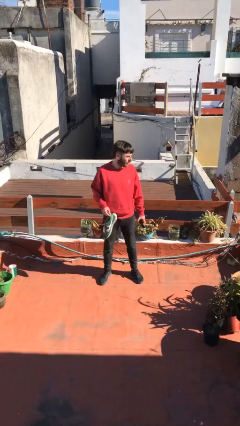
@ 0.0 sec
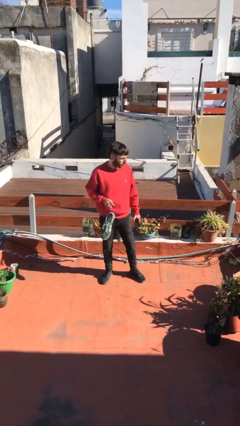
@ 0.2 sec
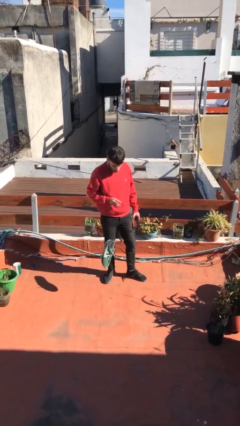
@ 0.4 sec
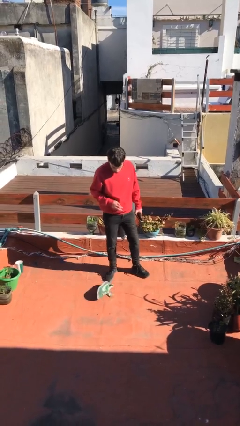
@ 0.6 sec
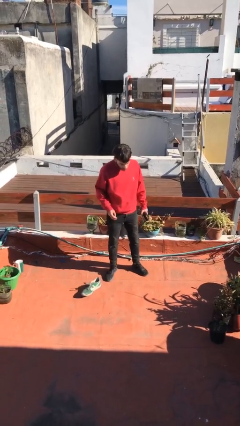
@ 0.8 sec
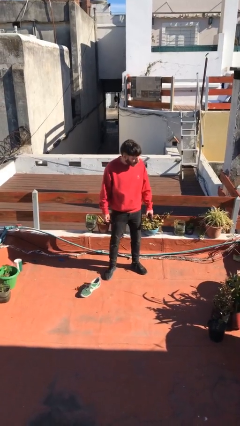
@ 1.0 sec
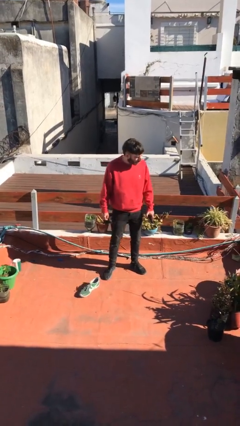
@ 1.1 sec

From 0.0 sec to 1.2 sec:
person drops object

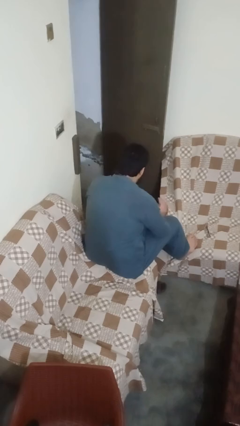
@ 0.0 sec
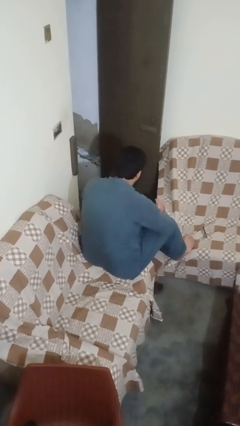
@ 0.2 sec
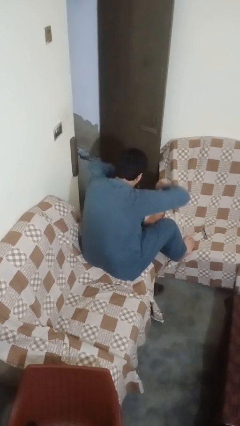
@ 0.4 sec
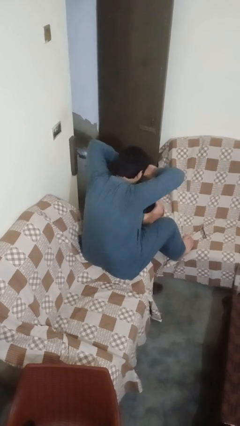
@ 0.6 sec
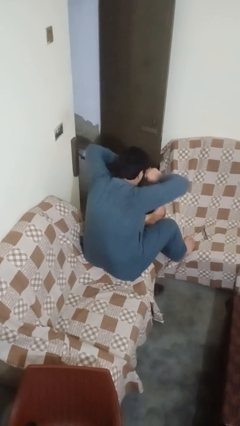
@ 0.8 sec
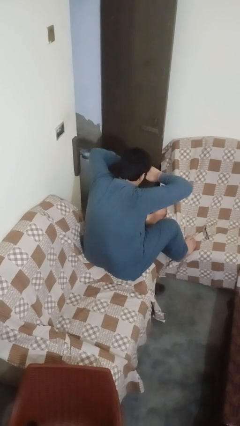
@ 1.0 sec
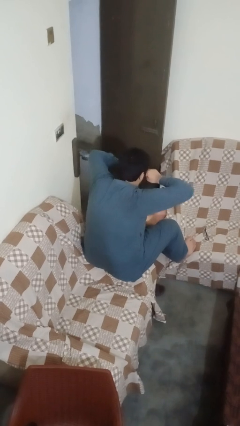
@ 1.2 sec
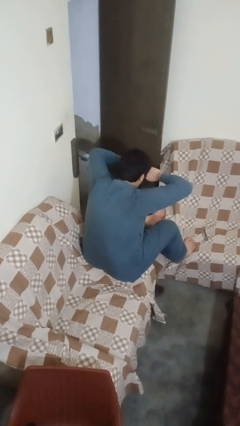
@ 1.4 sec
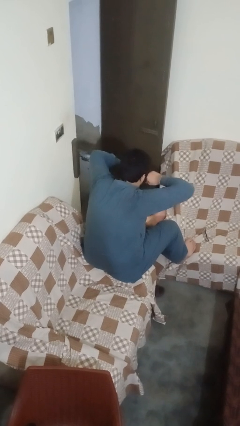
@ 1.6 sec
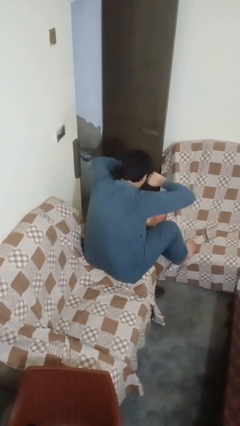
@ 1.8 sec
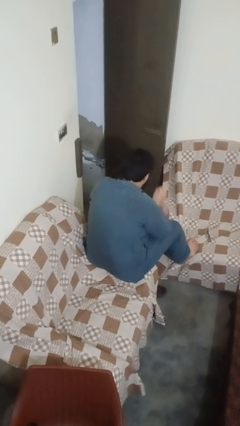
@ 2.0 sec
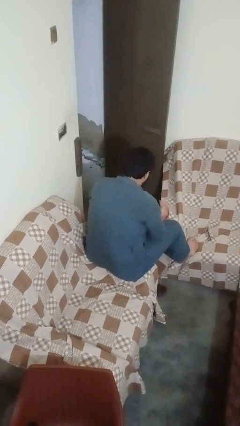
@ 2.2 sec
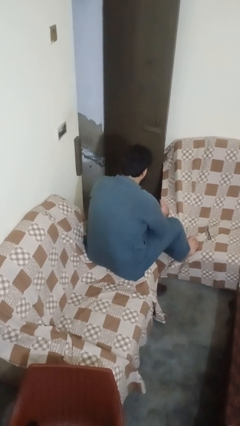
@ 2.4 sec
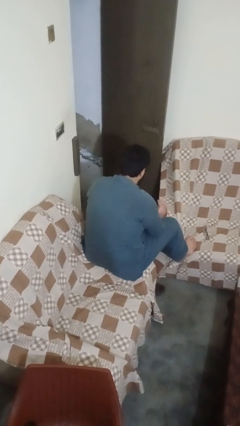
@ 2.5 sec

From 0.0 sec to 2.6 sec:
person rubs eyes

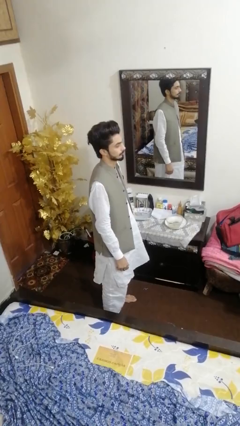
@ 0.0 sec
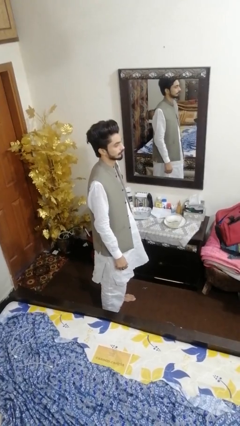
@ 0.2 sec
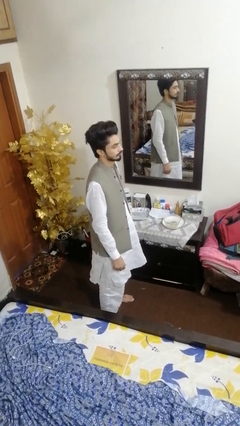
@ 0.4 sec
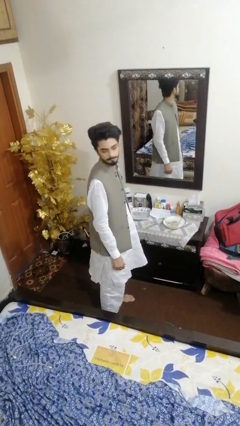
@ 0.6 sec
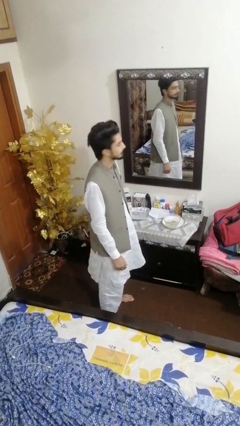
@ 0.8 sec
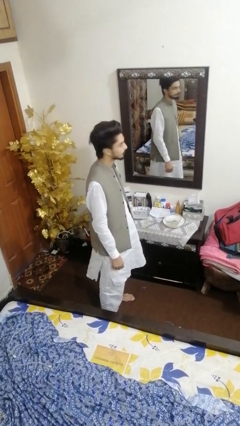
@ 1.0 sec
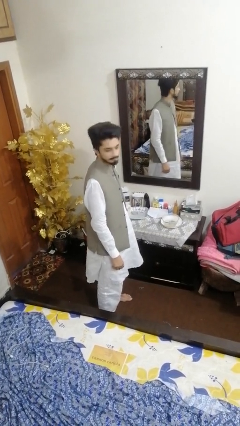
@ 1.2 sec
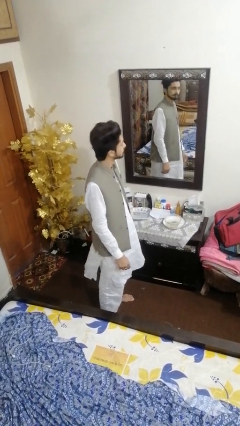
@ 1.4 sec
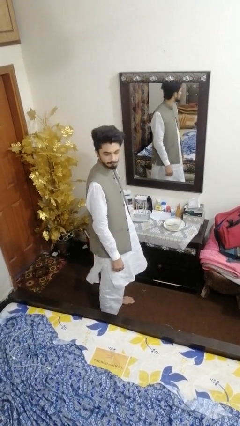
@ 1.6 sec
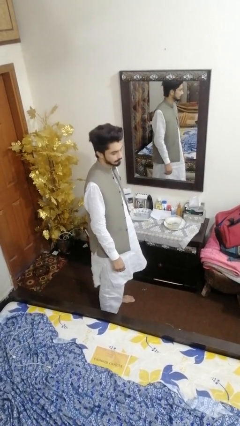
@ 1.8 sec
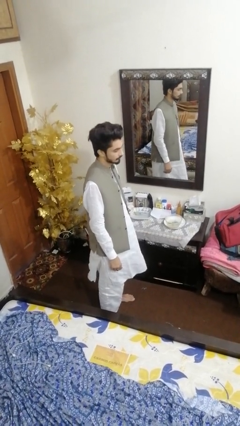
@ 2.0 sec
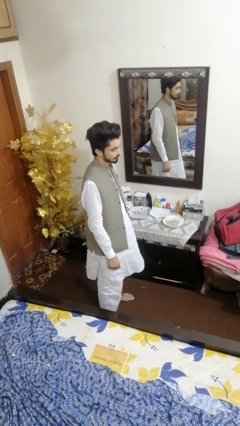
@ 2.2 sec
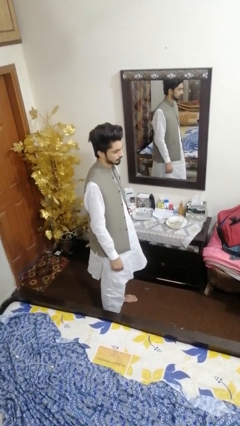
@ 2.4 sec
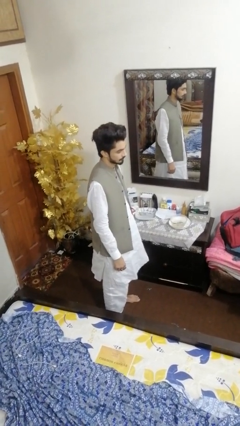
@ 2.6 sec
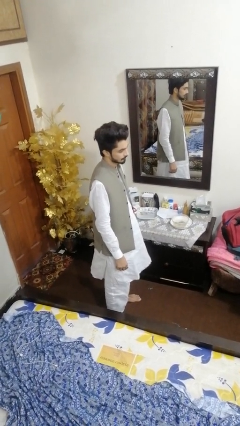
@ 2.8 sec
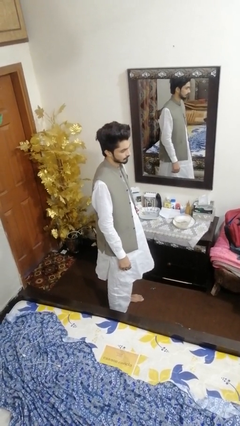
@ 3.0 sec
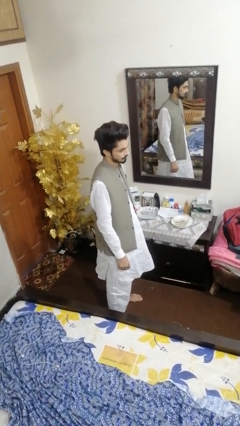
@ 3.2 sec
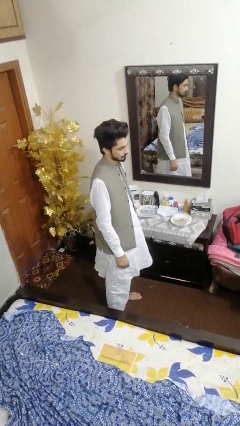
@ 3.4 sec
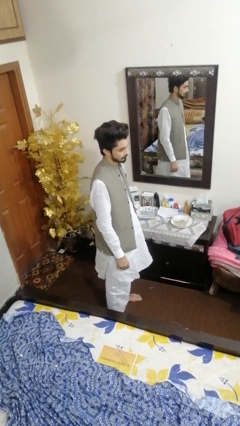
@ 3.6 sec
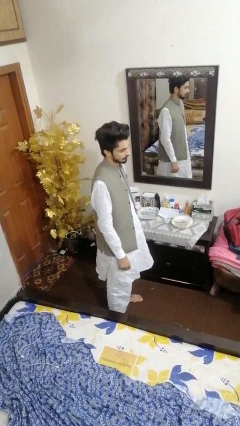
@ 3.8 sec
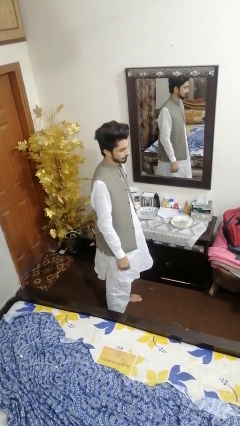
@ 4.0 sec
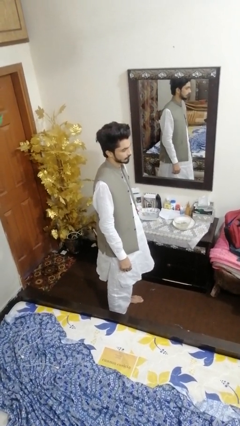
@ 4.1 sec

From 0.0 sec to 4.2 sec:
person shakes head

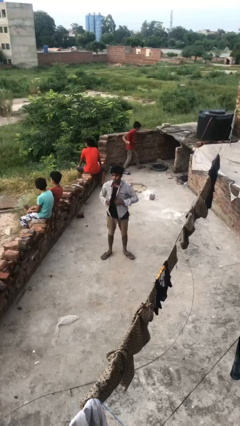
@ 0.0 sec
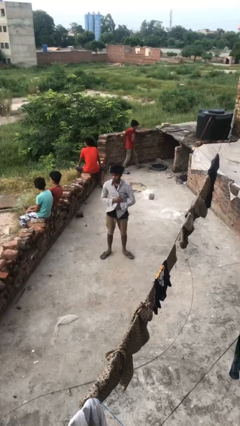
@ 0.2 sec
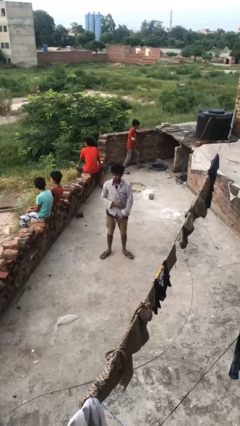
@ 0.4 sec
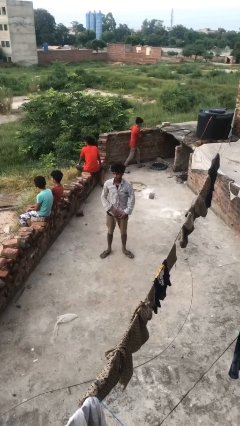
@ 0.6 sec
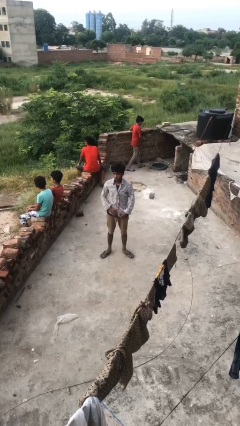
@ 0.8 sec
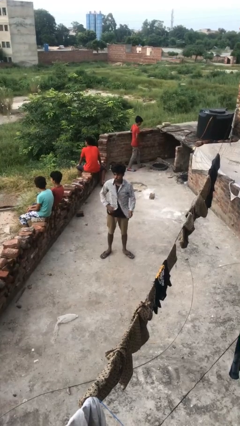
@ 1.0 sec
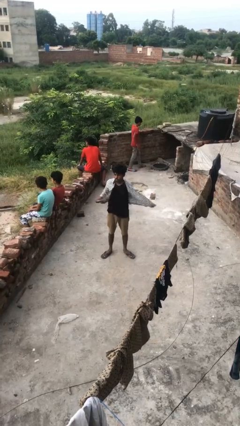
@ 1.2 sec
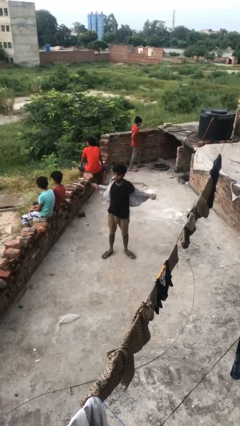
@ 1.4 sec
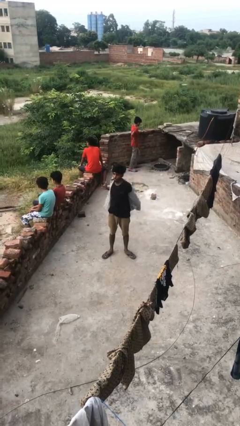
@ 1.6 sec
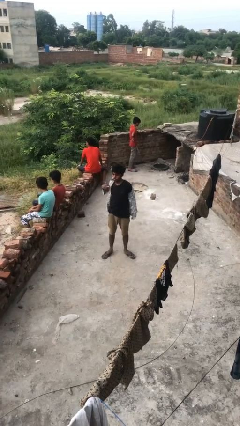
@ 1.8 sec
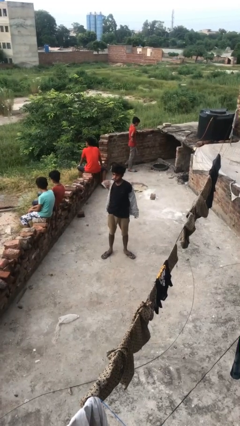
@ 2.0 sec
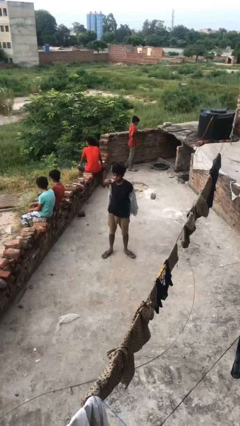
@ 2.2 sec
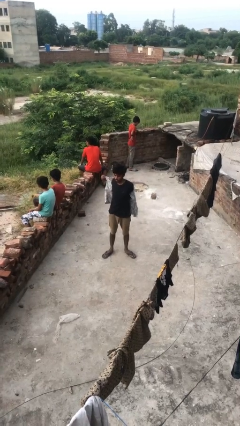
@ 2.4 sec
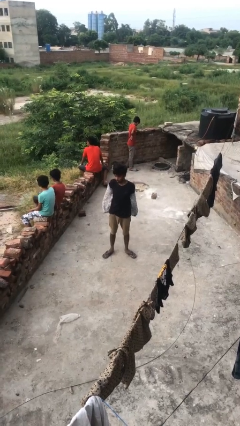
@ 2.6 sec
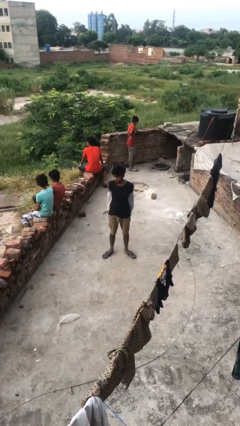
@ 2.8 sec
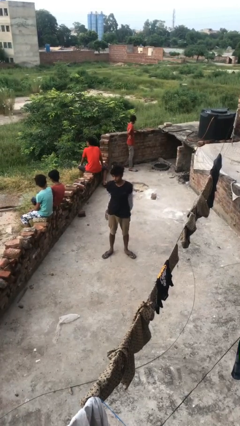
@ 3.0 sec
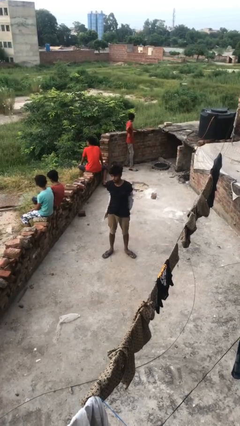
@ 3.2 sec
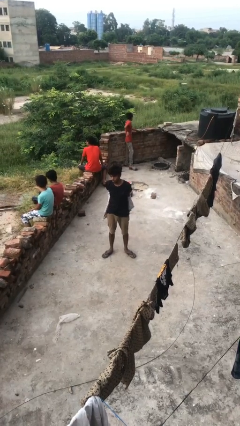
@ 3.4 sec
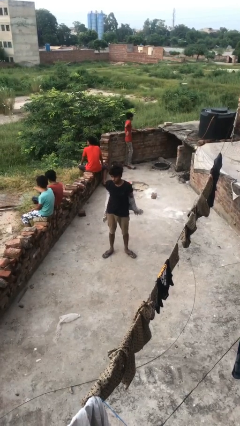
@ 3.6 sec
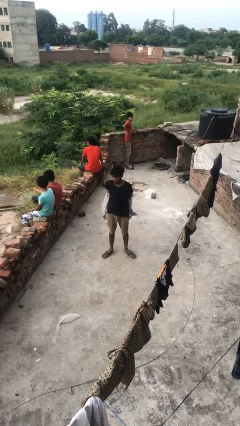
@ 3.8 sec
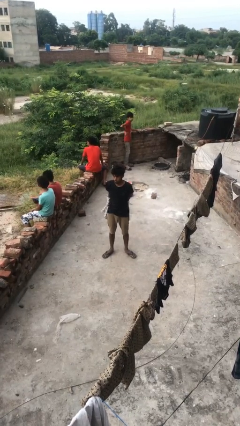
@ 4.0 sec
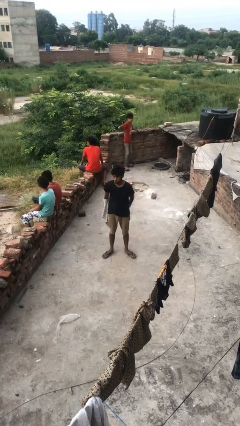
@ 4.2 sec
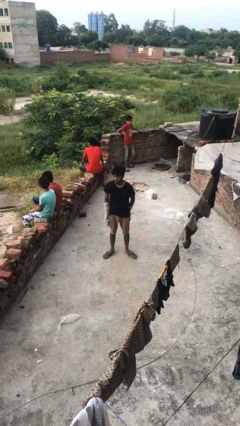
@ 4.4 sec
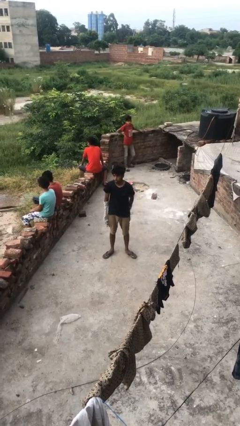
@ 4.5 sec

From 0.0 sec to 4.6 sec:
person takes off shirt

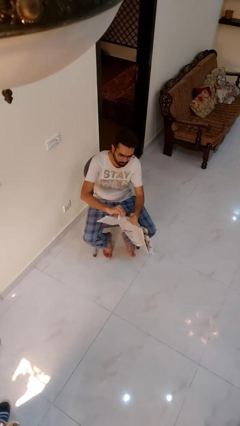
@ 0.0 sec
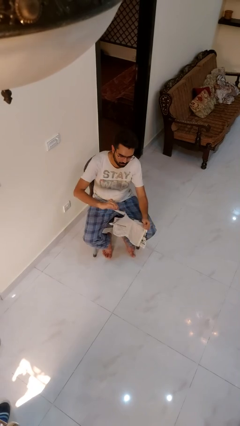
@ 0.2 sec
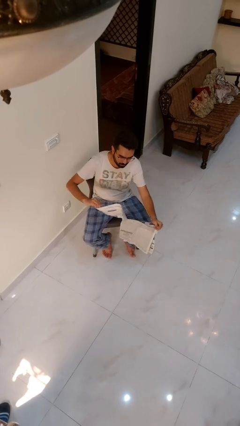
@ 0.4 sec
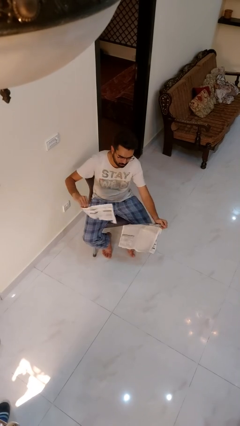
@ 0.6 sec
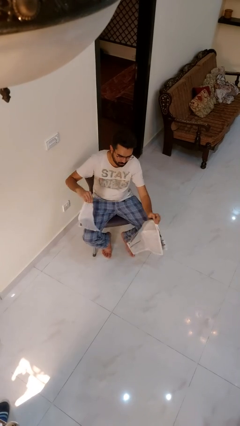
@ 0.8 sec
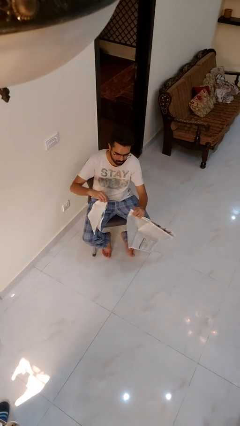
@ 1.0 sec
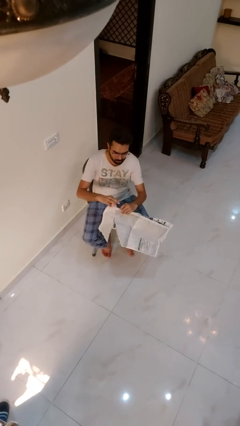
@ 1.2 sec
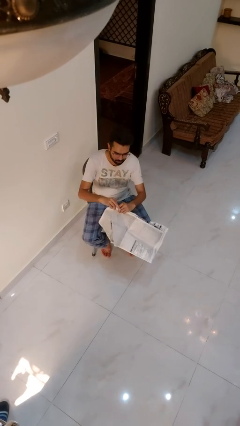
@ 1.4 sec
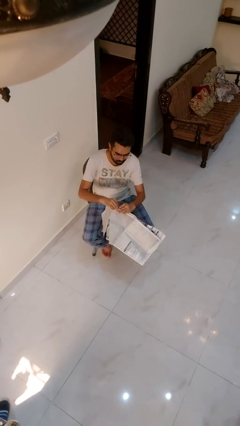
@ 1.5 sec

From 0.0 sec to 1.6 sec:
person tears paper

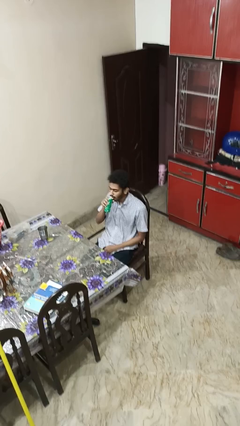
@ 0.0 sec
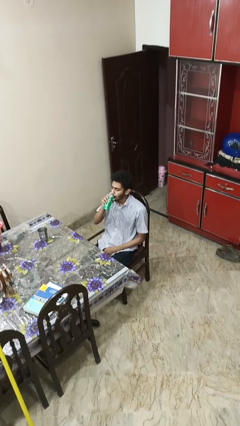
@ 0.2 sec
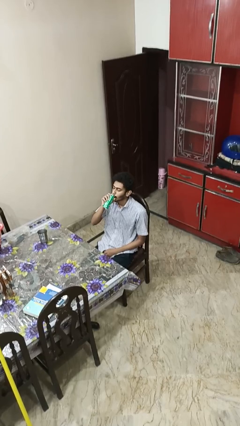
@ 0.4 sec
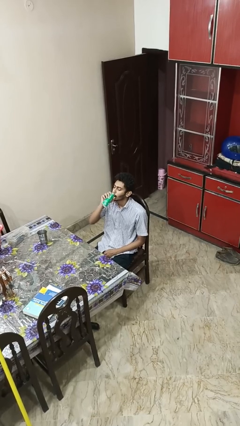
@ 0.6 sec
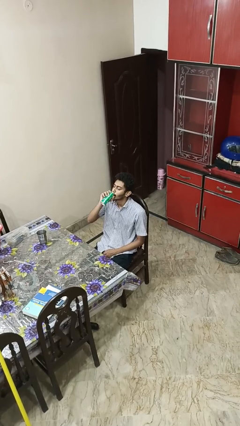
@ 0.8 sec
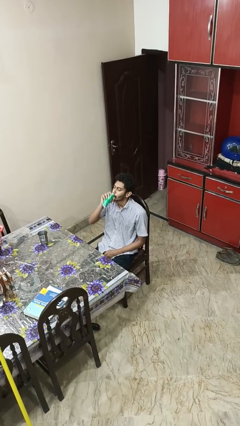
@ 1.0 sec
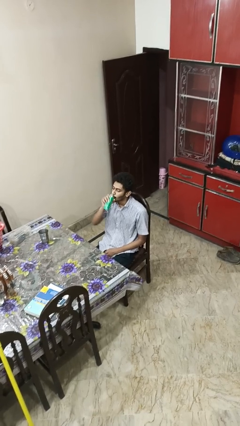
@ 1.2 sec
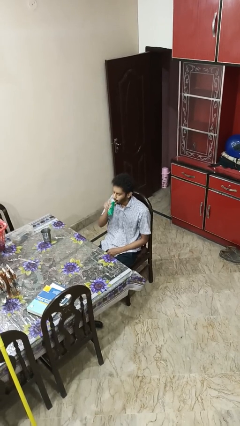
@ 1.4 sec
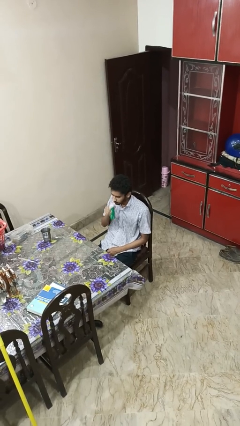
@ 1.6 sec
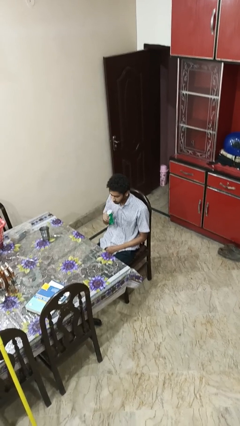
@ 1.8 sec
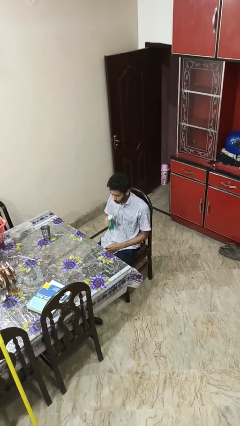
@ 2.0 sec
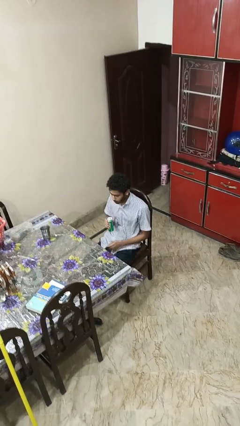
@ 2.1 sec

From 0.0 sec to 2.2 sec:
person drinks from beverage can

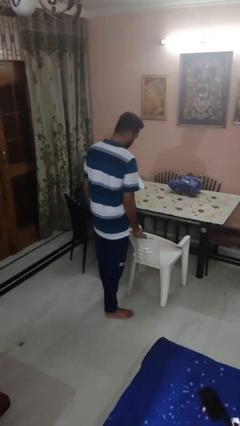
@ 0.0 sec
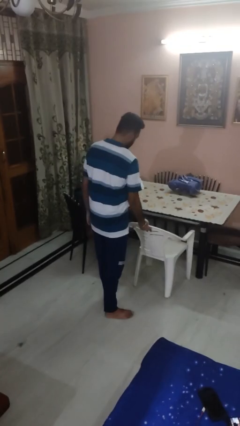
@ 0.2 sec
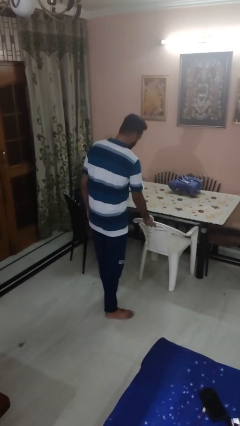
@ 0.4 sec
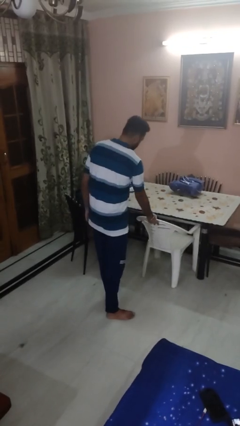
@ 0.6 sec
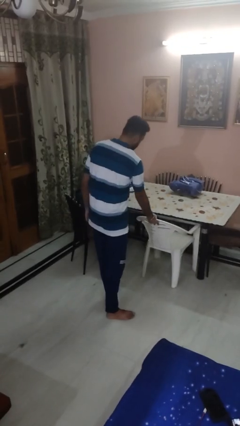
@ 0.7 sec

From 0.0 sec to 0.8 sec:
person pushes in chair
